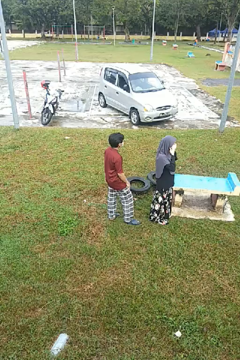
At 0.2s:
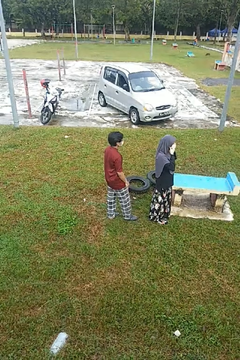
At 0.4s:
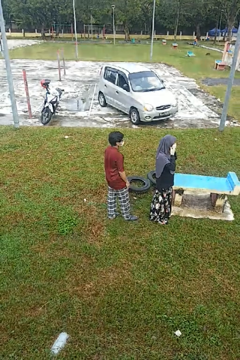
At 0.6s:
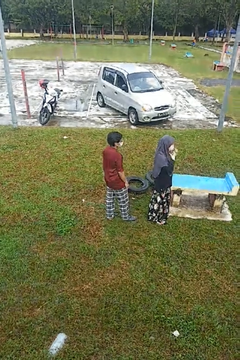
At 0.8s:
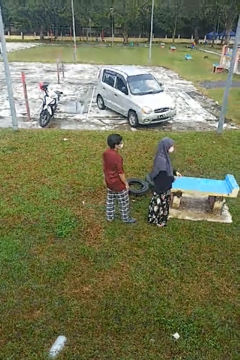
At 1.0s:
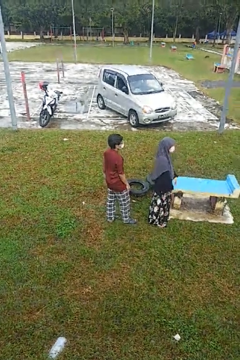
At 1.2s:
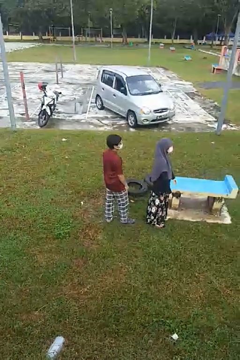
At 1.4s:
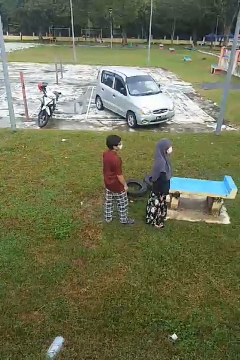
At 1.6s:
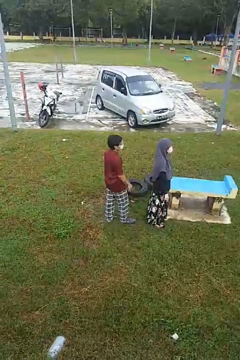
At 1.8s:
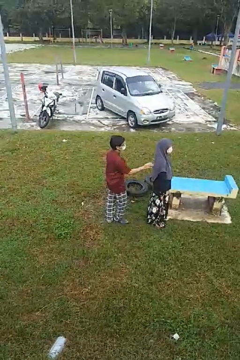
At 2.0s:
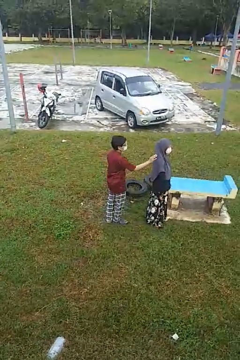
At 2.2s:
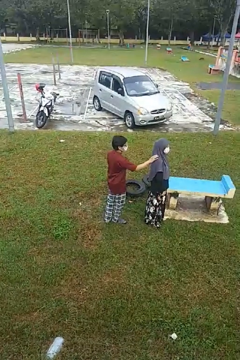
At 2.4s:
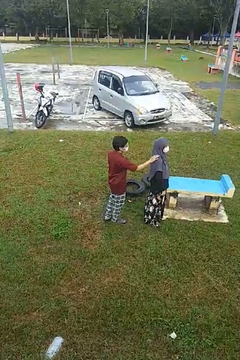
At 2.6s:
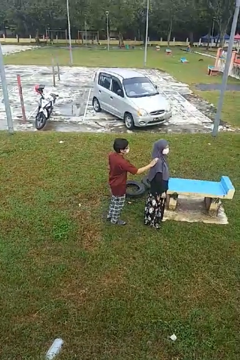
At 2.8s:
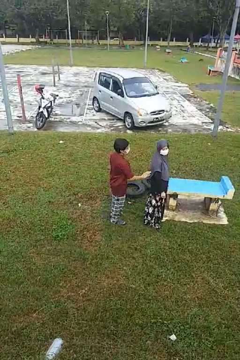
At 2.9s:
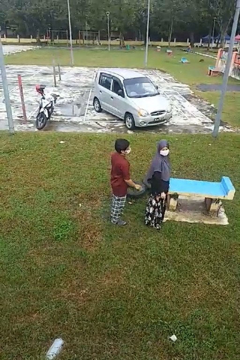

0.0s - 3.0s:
person touches back of person

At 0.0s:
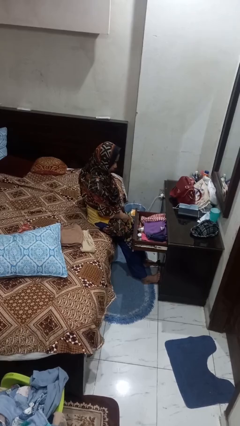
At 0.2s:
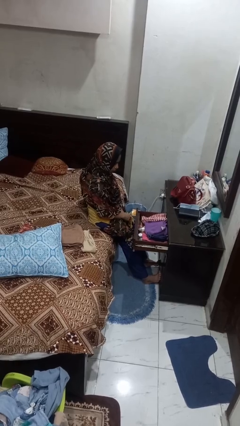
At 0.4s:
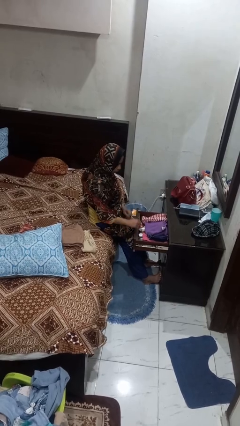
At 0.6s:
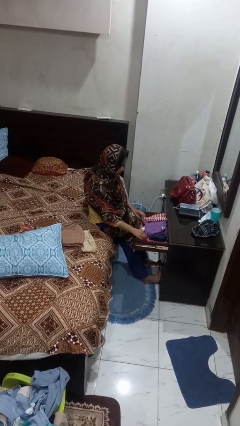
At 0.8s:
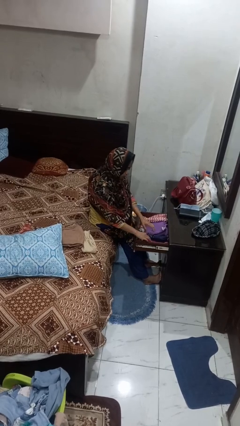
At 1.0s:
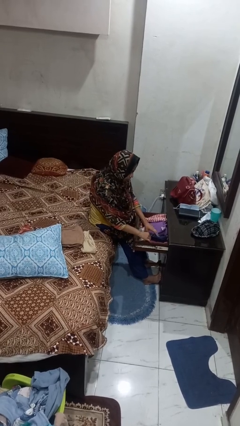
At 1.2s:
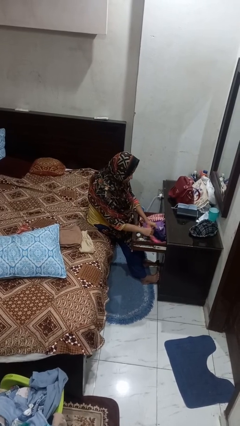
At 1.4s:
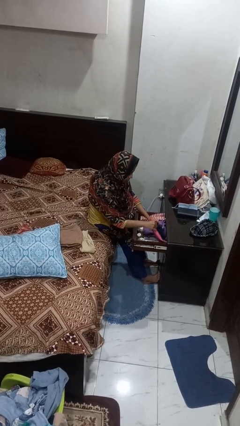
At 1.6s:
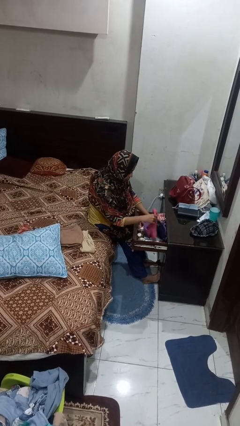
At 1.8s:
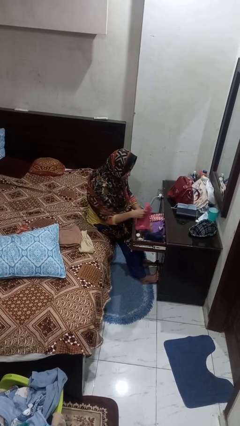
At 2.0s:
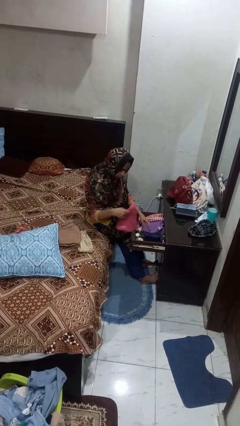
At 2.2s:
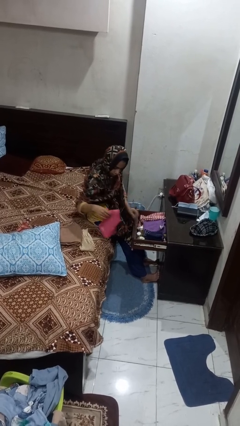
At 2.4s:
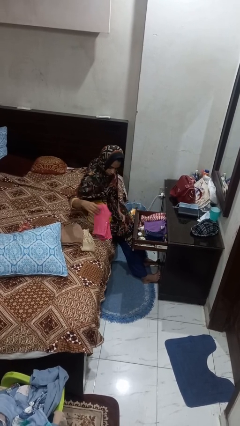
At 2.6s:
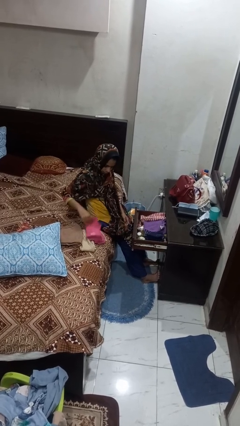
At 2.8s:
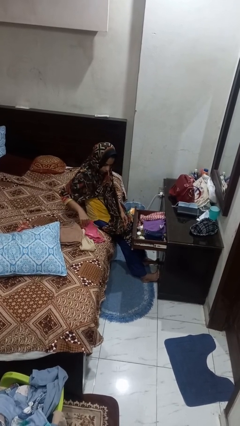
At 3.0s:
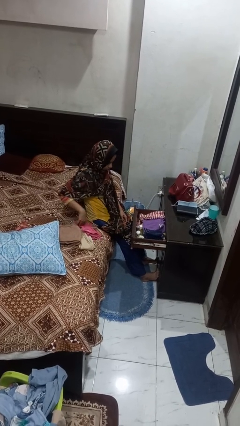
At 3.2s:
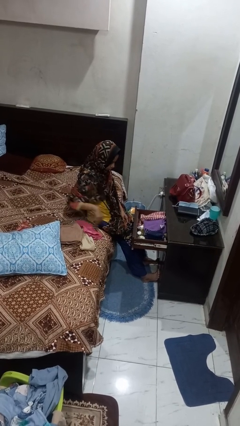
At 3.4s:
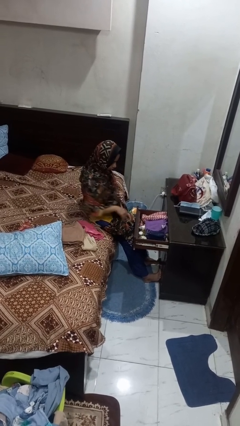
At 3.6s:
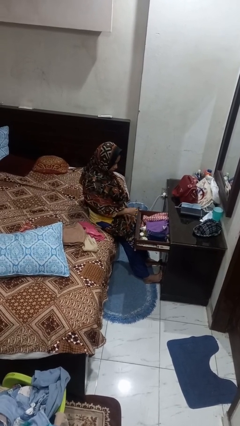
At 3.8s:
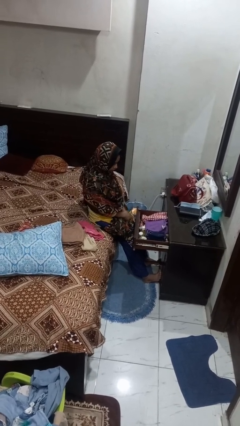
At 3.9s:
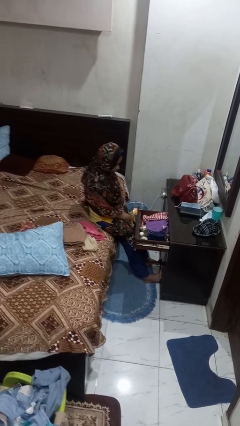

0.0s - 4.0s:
person takes clothes from dresser

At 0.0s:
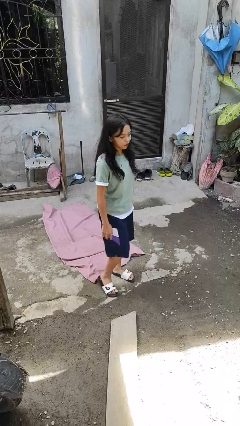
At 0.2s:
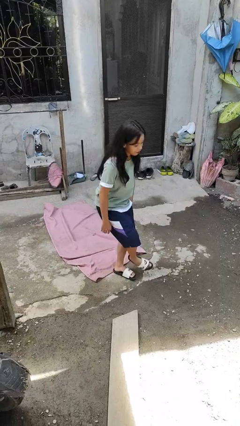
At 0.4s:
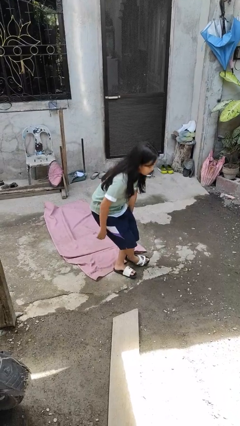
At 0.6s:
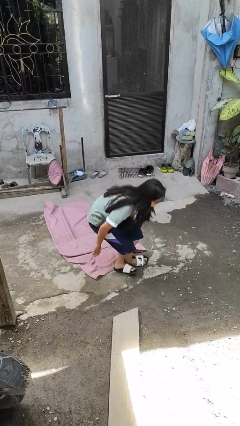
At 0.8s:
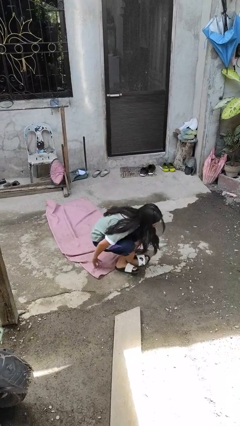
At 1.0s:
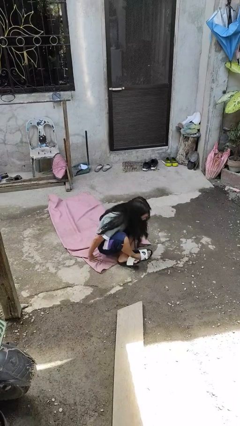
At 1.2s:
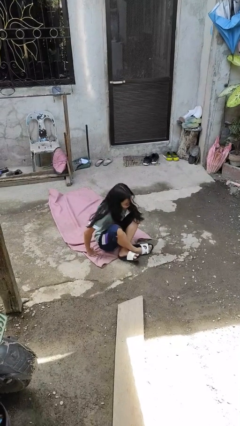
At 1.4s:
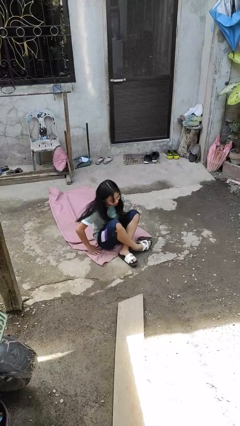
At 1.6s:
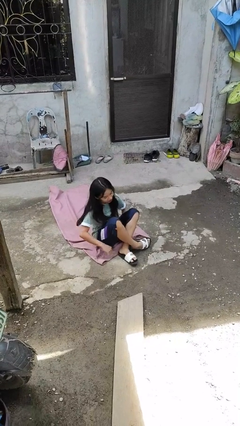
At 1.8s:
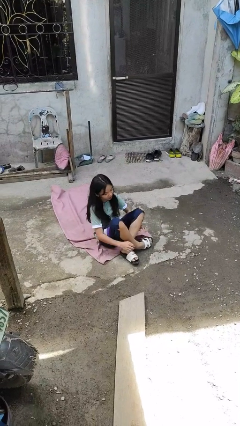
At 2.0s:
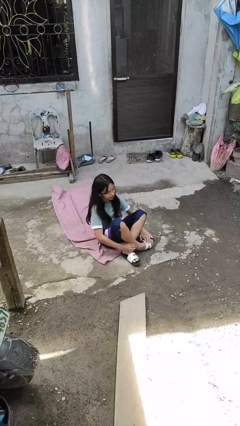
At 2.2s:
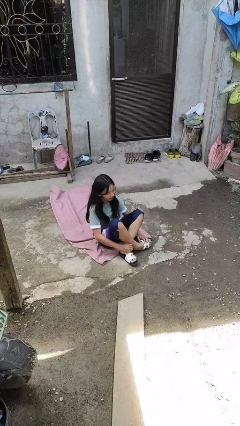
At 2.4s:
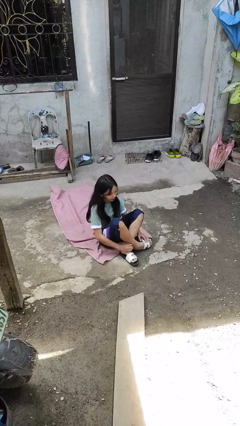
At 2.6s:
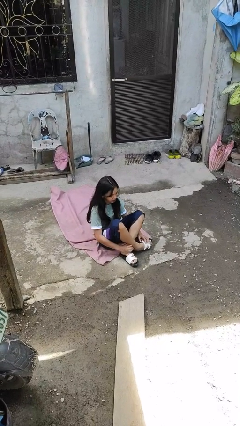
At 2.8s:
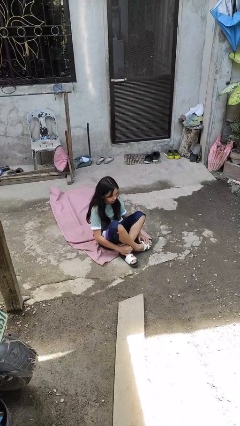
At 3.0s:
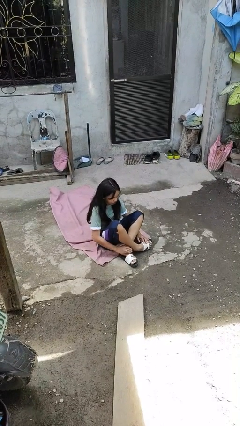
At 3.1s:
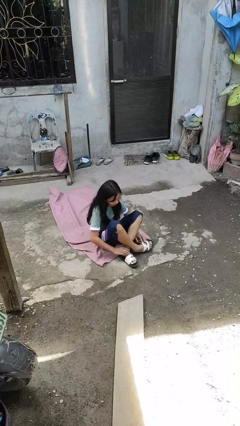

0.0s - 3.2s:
person sits crisscross

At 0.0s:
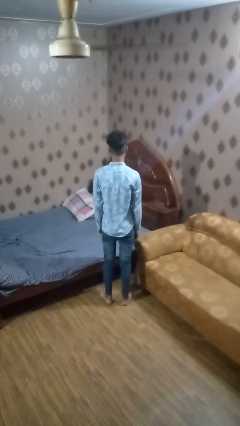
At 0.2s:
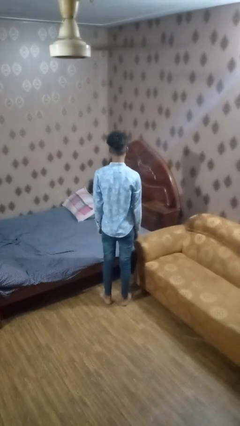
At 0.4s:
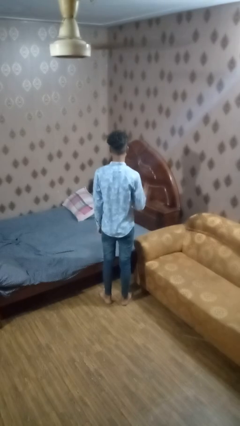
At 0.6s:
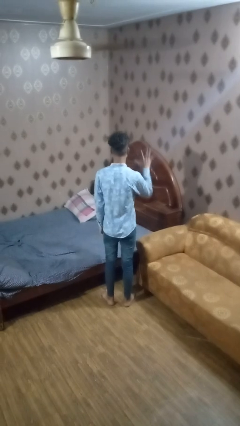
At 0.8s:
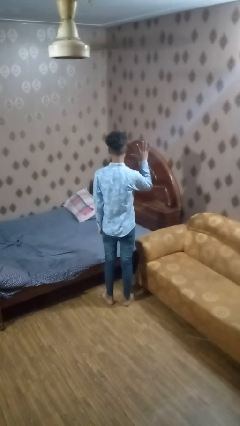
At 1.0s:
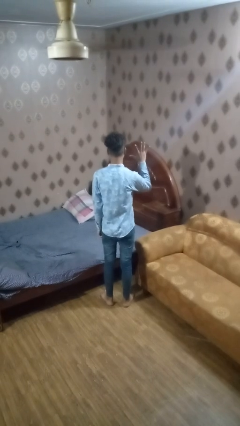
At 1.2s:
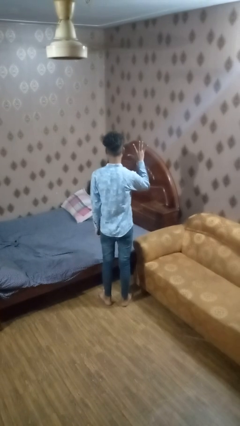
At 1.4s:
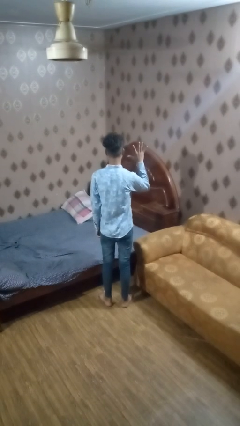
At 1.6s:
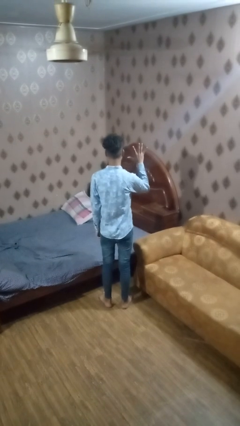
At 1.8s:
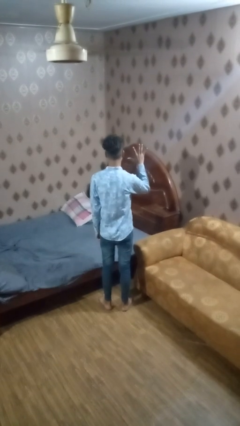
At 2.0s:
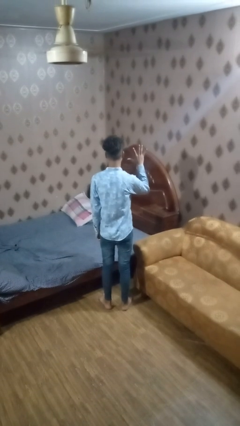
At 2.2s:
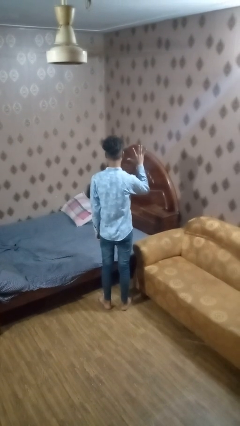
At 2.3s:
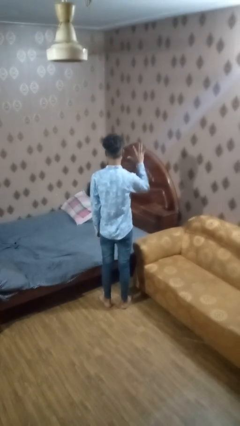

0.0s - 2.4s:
person gestures number five

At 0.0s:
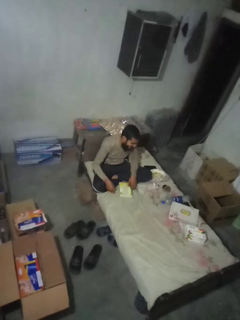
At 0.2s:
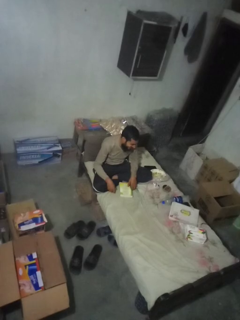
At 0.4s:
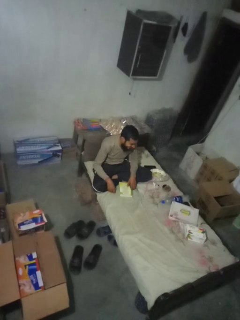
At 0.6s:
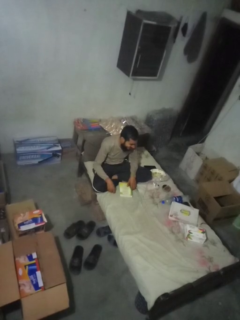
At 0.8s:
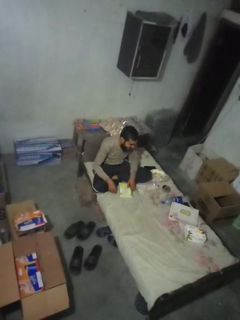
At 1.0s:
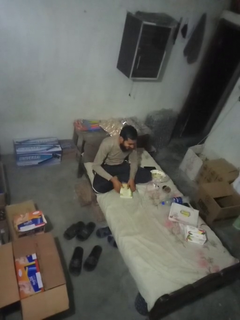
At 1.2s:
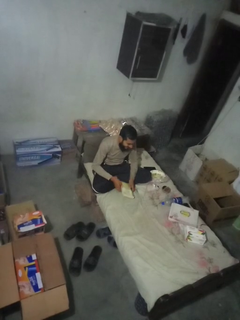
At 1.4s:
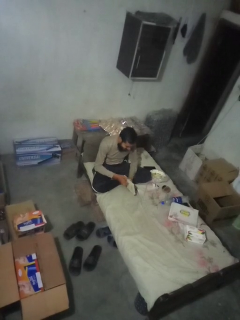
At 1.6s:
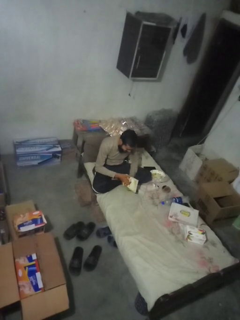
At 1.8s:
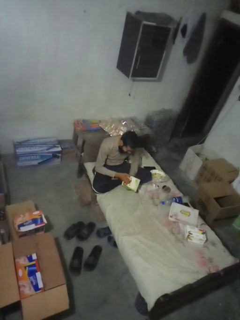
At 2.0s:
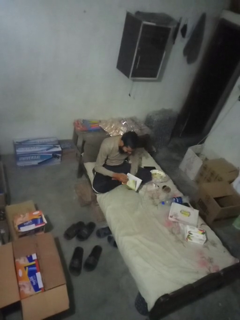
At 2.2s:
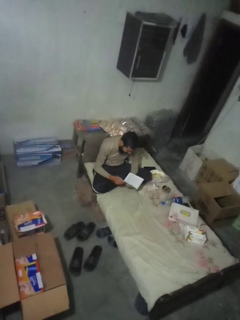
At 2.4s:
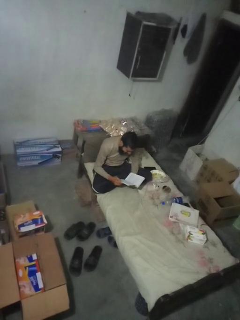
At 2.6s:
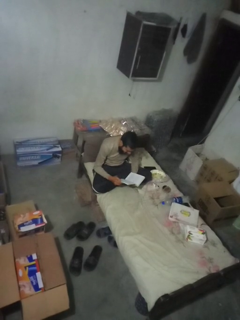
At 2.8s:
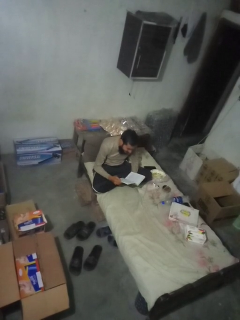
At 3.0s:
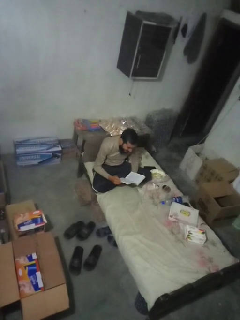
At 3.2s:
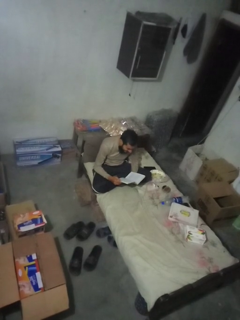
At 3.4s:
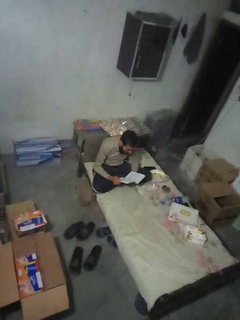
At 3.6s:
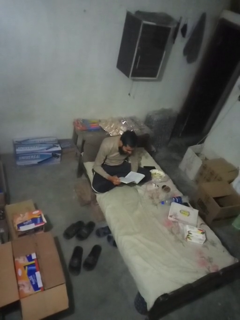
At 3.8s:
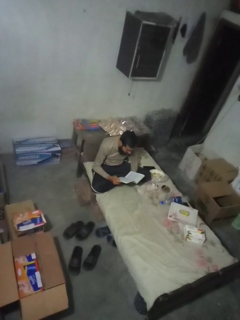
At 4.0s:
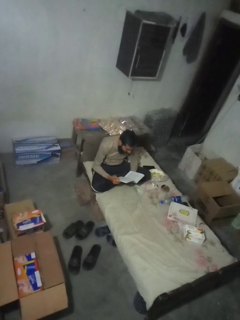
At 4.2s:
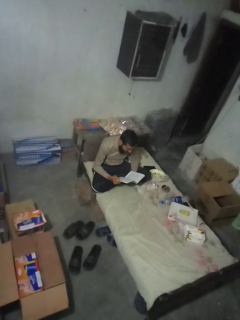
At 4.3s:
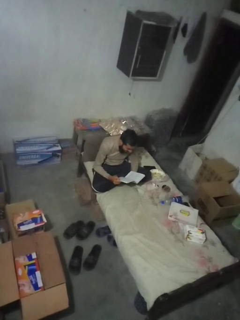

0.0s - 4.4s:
person reads book

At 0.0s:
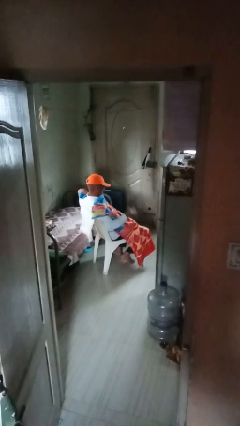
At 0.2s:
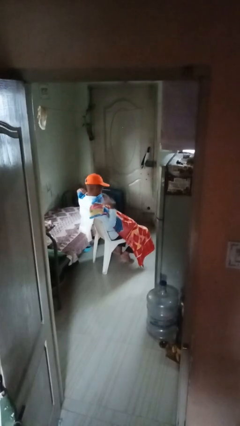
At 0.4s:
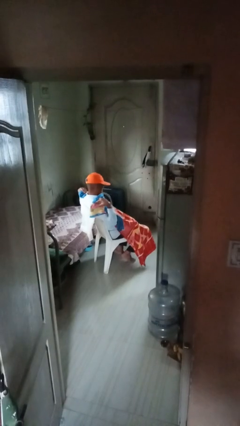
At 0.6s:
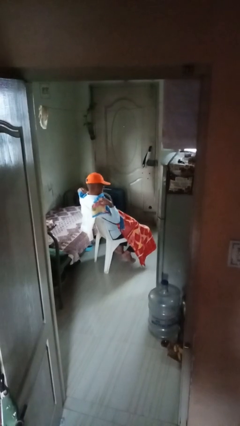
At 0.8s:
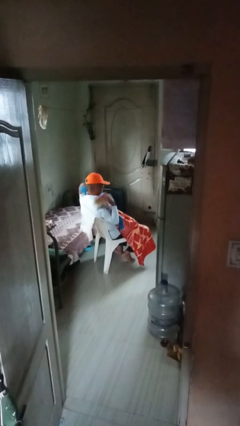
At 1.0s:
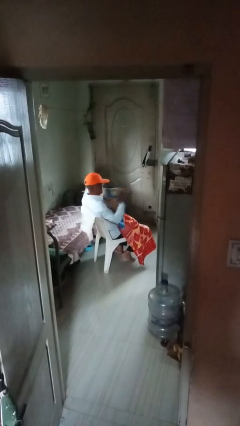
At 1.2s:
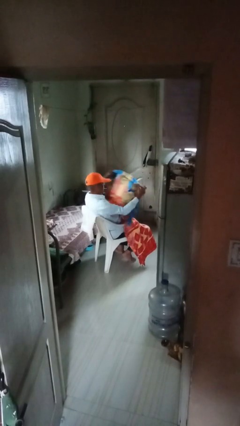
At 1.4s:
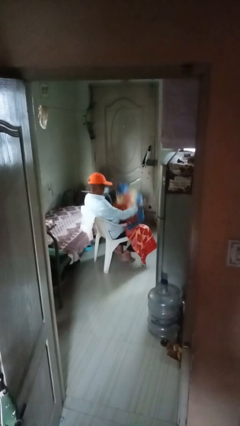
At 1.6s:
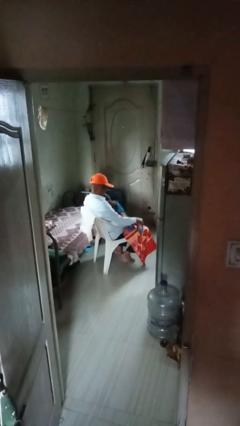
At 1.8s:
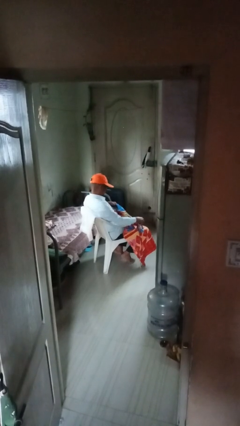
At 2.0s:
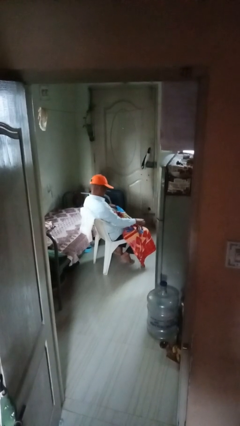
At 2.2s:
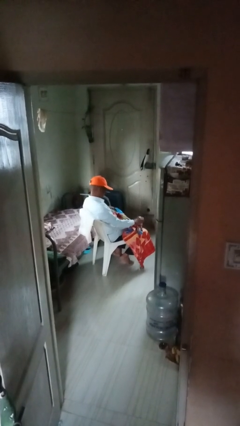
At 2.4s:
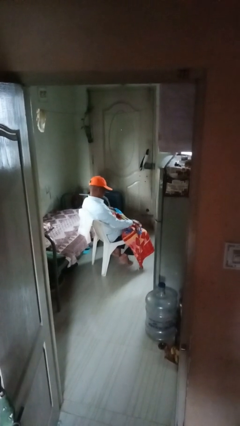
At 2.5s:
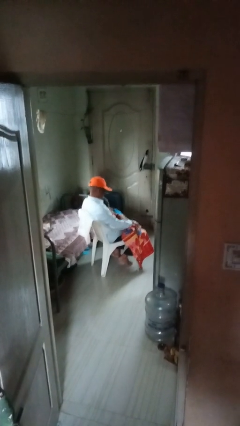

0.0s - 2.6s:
person uncovers with blanket
